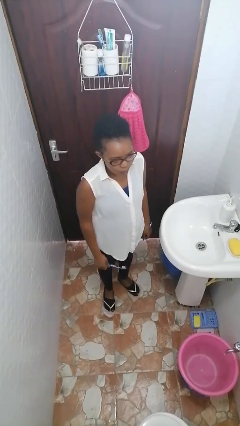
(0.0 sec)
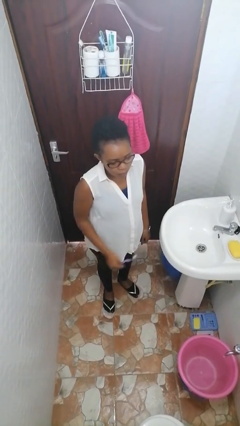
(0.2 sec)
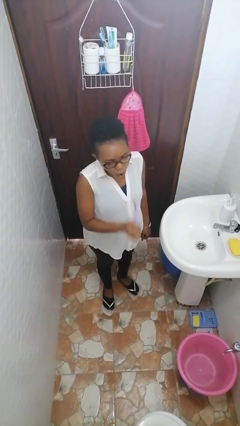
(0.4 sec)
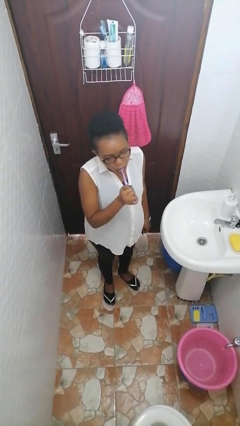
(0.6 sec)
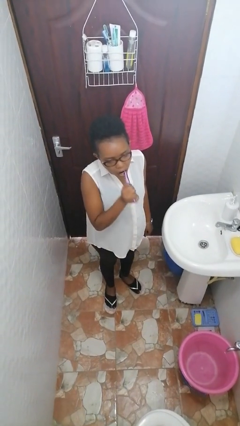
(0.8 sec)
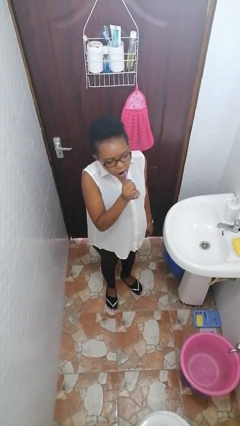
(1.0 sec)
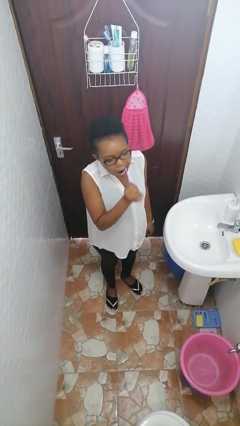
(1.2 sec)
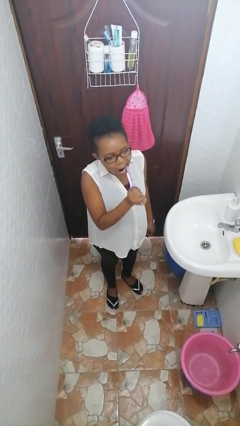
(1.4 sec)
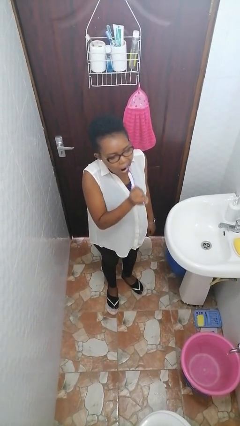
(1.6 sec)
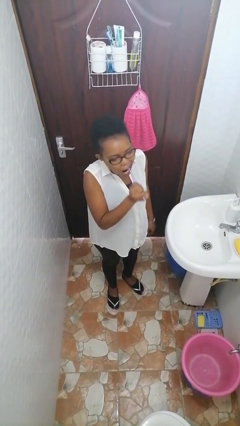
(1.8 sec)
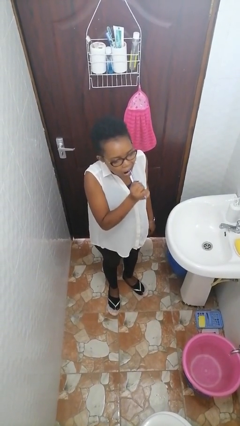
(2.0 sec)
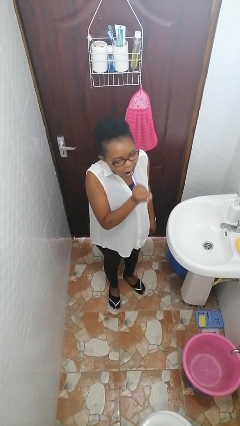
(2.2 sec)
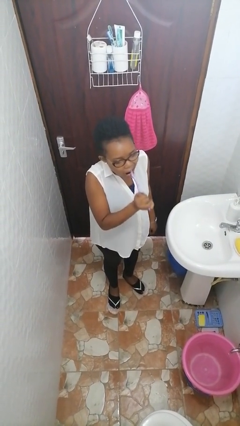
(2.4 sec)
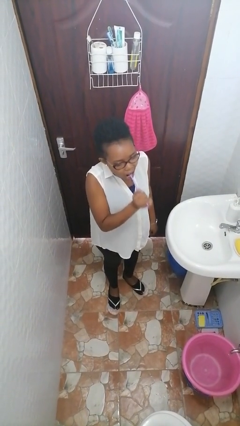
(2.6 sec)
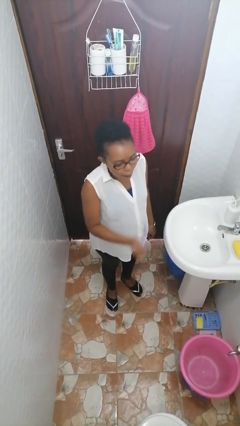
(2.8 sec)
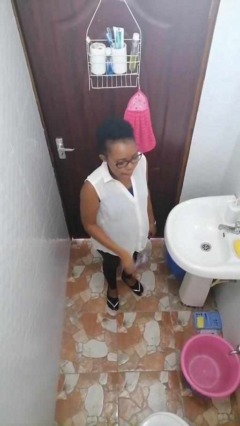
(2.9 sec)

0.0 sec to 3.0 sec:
person brushes teeth

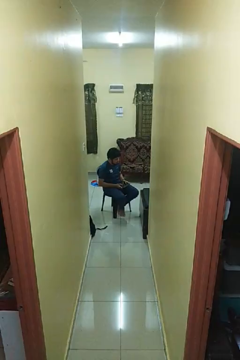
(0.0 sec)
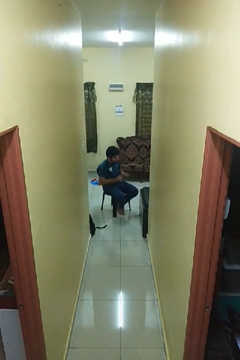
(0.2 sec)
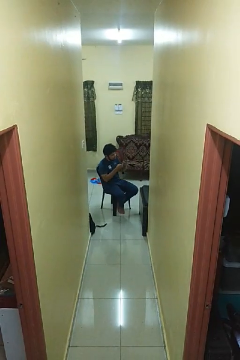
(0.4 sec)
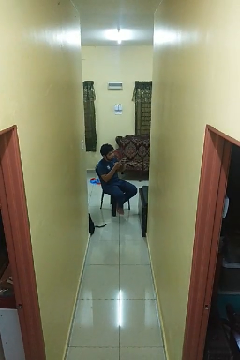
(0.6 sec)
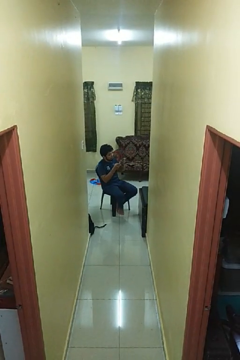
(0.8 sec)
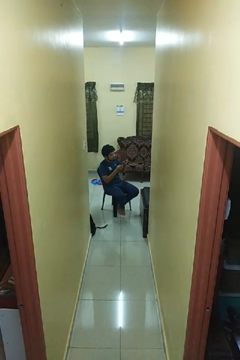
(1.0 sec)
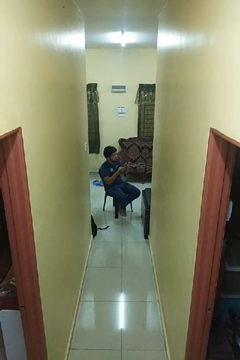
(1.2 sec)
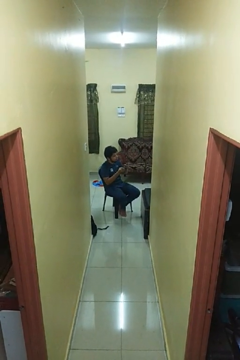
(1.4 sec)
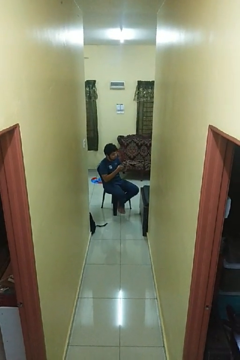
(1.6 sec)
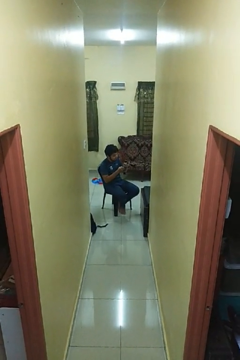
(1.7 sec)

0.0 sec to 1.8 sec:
person interacts with handheld game

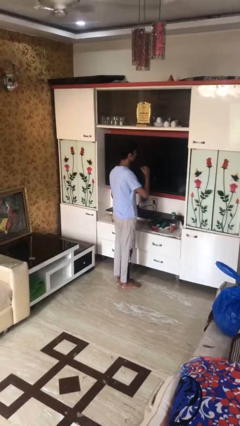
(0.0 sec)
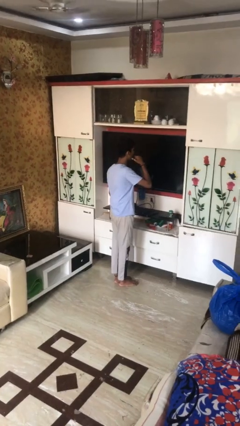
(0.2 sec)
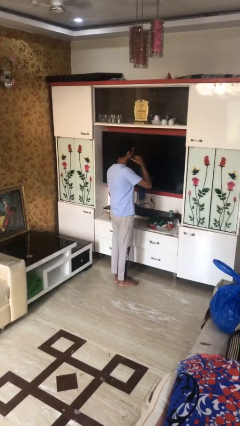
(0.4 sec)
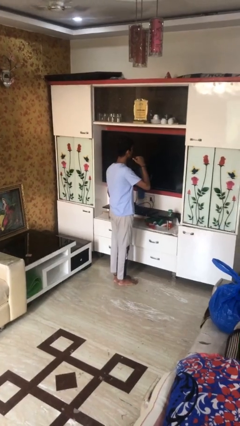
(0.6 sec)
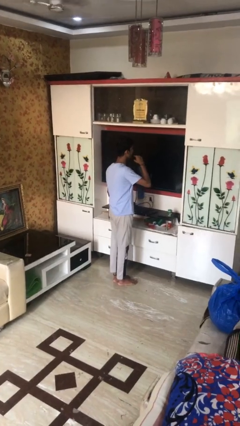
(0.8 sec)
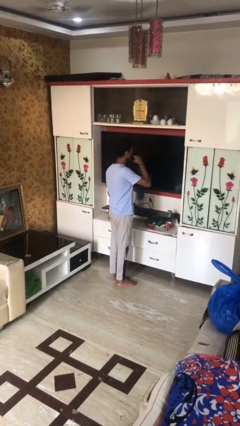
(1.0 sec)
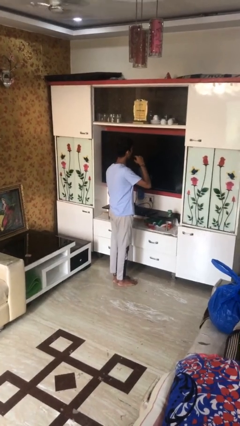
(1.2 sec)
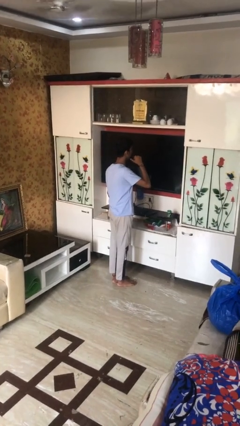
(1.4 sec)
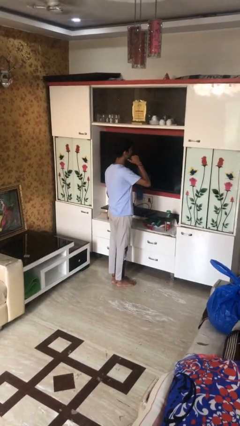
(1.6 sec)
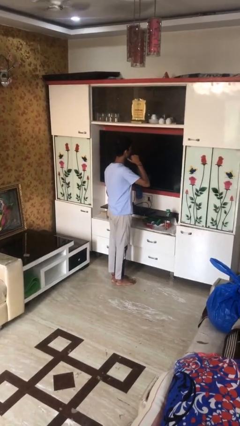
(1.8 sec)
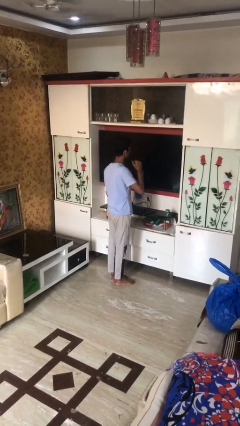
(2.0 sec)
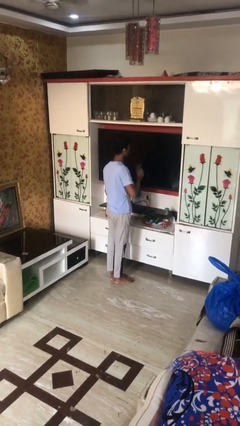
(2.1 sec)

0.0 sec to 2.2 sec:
person licks fingers

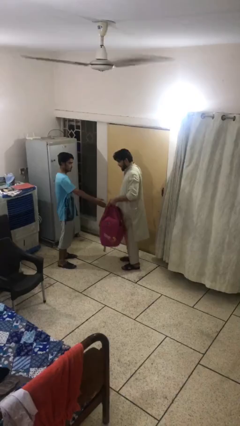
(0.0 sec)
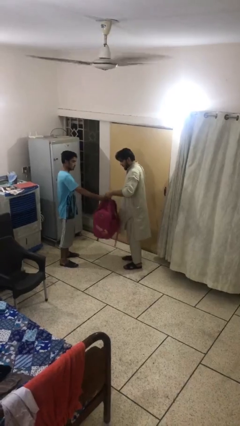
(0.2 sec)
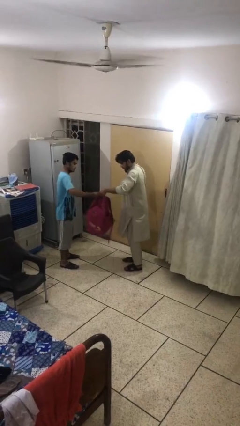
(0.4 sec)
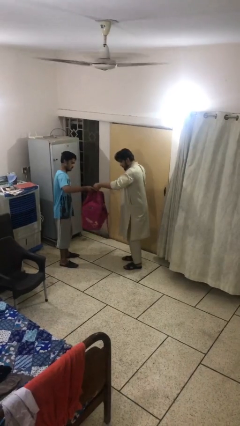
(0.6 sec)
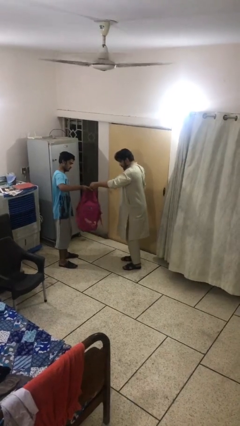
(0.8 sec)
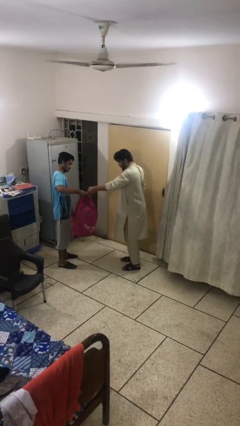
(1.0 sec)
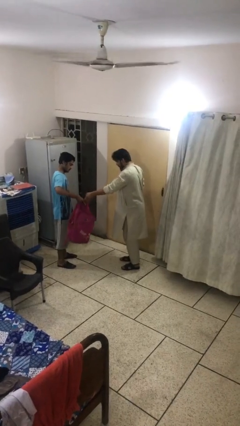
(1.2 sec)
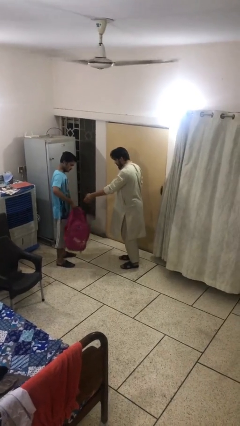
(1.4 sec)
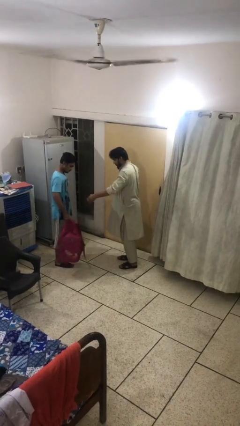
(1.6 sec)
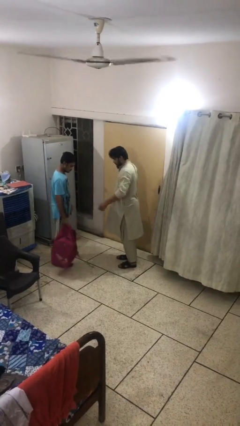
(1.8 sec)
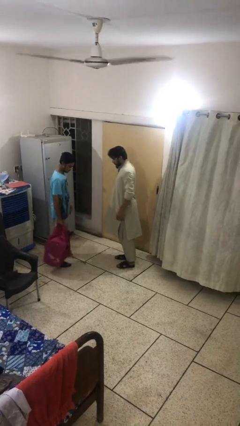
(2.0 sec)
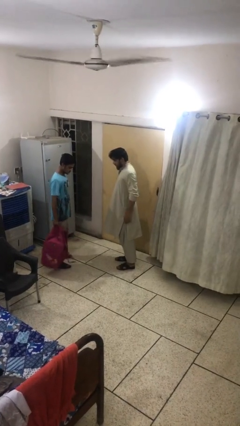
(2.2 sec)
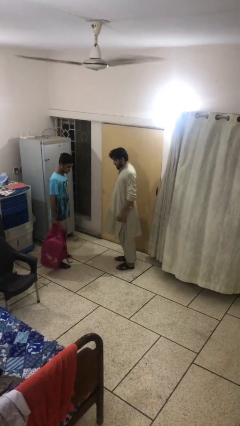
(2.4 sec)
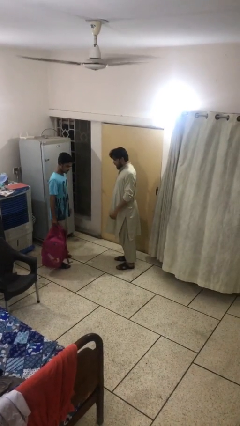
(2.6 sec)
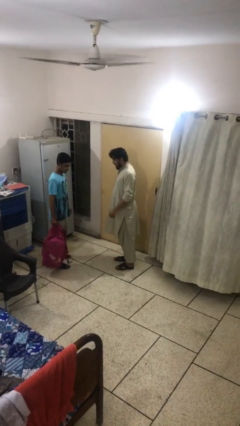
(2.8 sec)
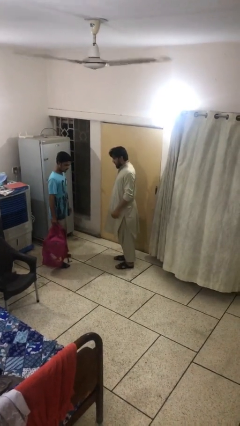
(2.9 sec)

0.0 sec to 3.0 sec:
person transfers object to person

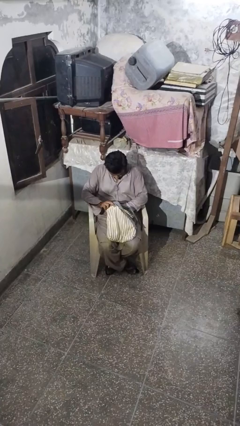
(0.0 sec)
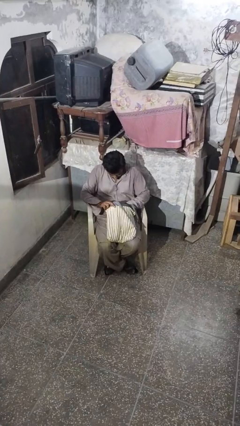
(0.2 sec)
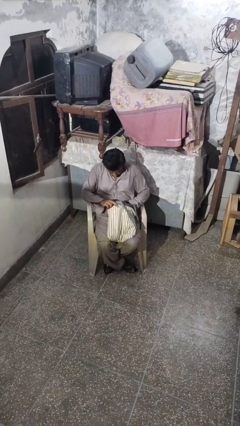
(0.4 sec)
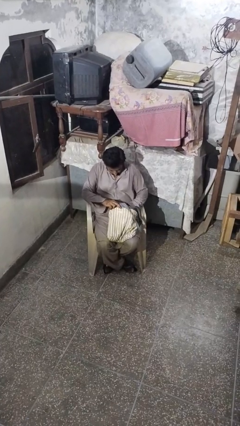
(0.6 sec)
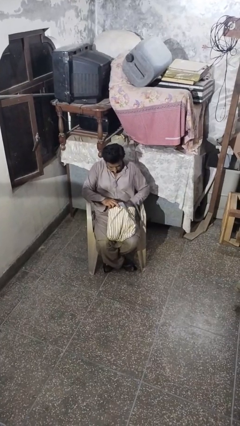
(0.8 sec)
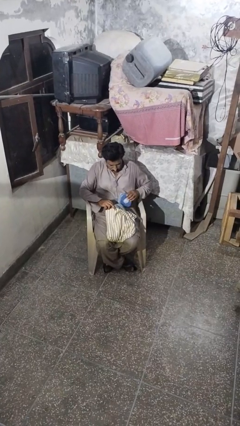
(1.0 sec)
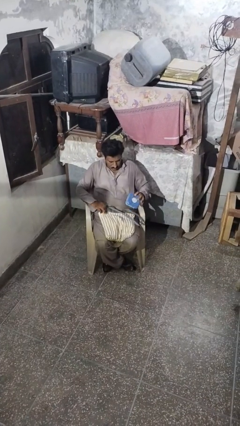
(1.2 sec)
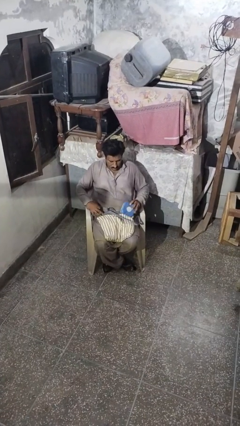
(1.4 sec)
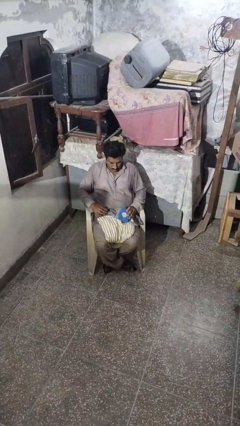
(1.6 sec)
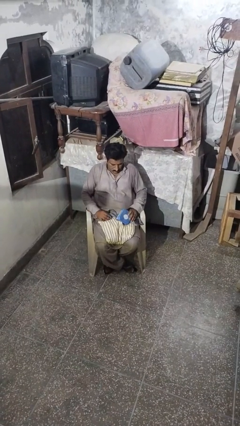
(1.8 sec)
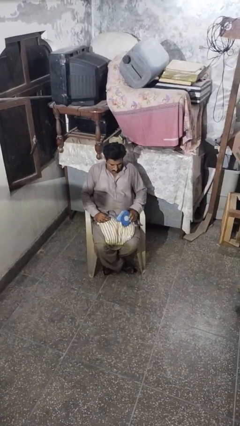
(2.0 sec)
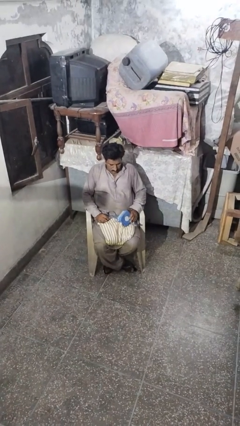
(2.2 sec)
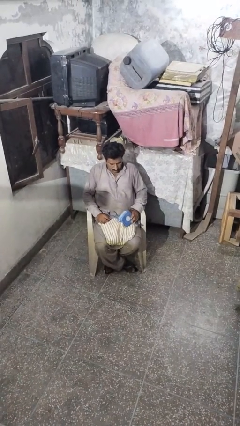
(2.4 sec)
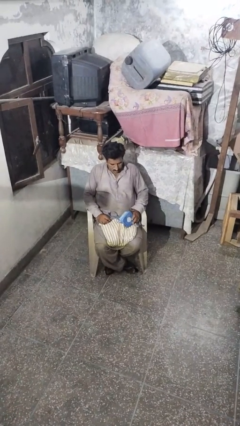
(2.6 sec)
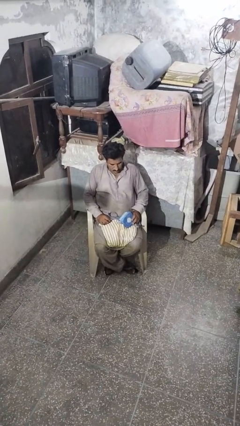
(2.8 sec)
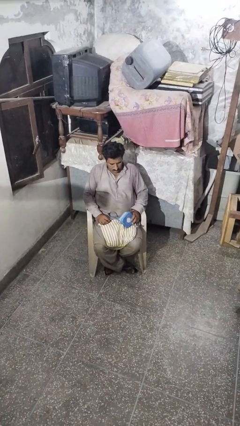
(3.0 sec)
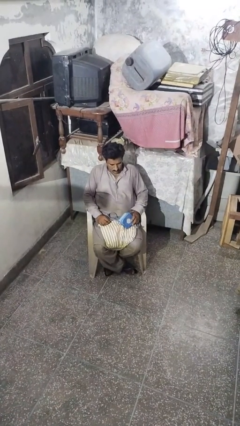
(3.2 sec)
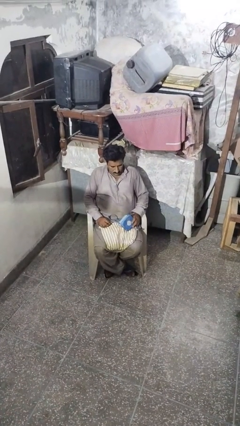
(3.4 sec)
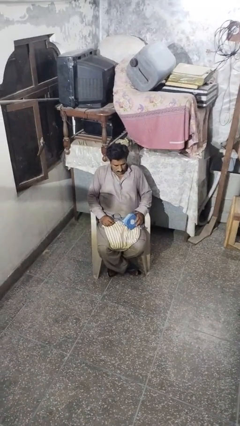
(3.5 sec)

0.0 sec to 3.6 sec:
person takes object from backpack

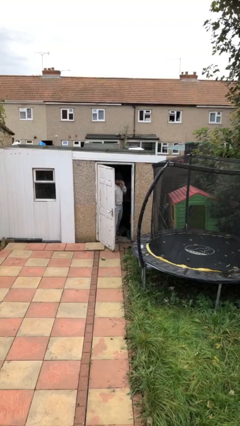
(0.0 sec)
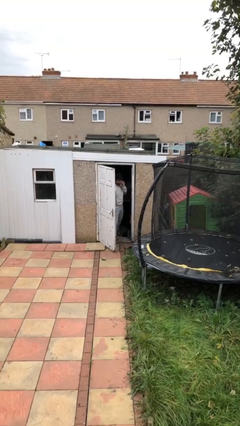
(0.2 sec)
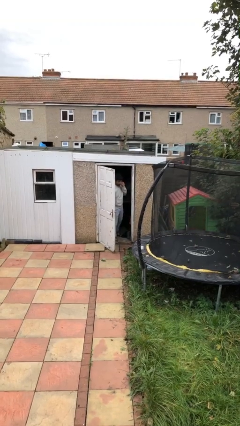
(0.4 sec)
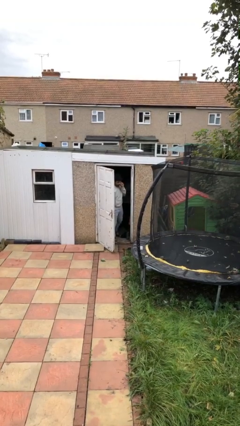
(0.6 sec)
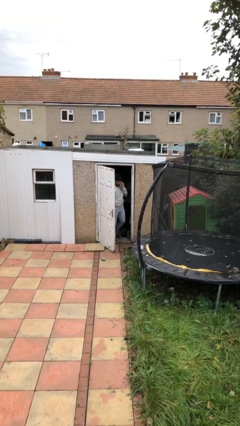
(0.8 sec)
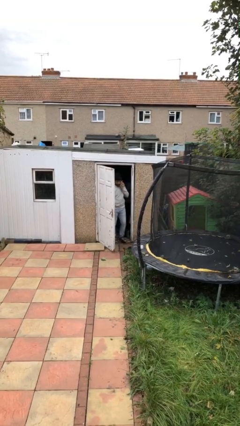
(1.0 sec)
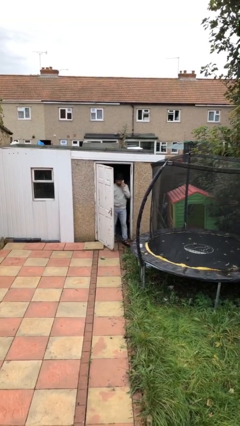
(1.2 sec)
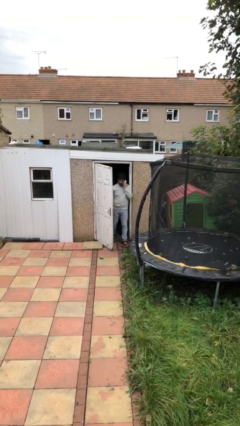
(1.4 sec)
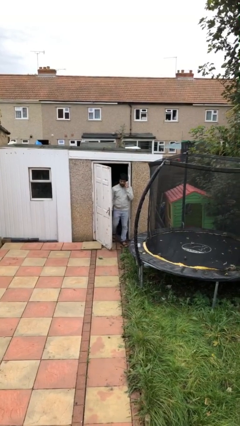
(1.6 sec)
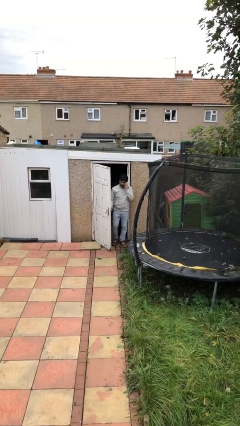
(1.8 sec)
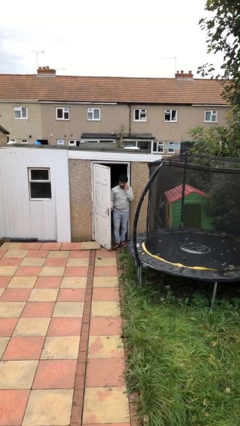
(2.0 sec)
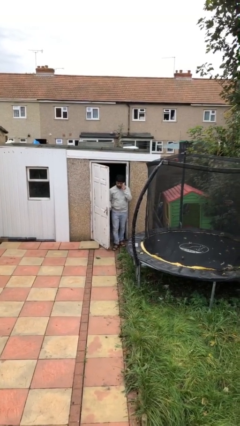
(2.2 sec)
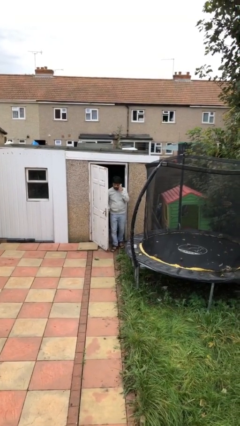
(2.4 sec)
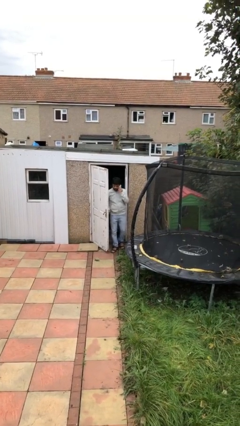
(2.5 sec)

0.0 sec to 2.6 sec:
person enters scene through structure

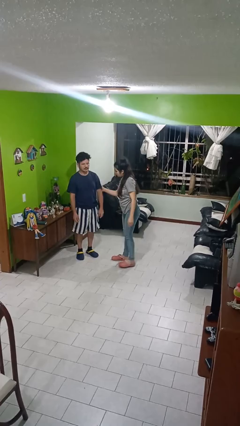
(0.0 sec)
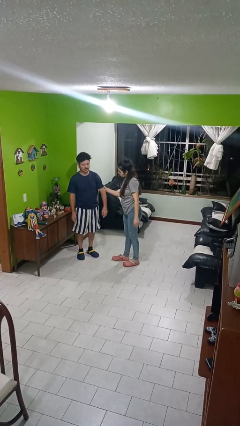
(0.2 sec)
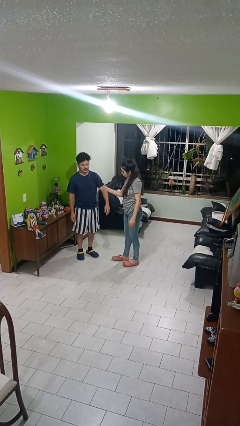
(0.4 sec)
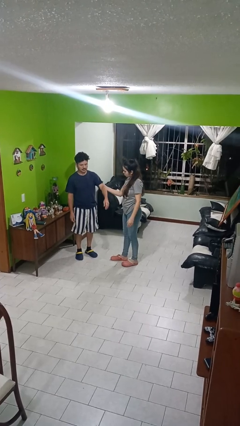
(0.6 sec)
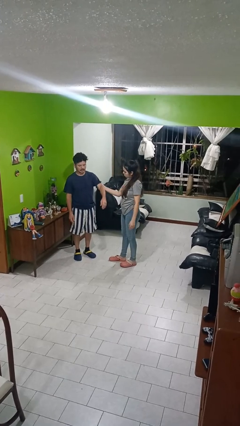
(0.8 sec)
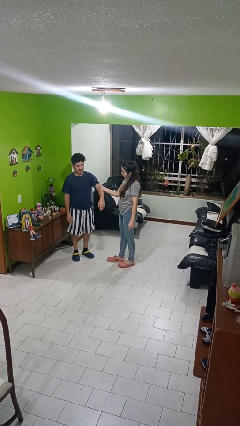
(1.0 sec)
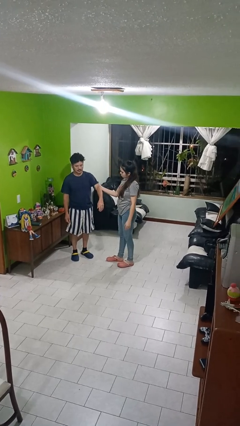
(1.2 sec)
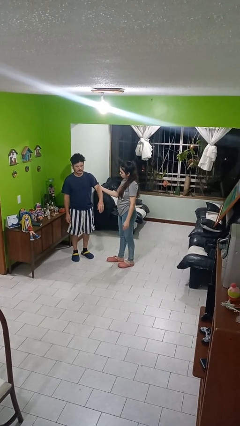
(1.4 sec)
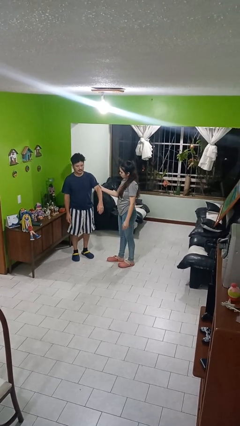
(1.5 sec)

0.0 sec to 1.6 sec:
person grabs person by bicep
